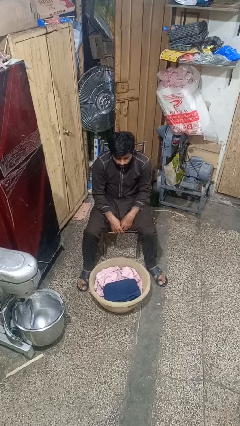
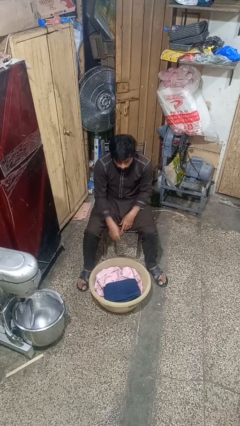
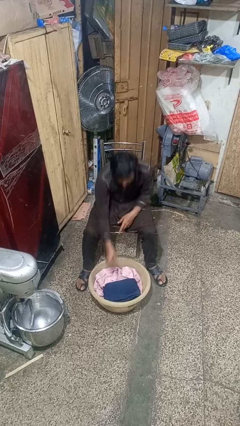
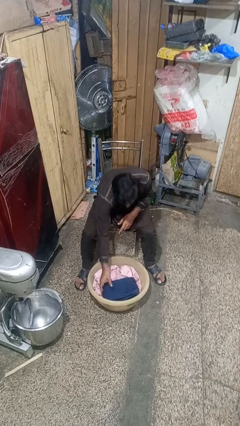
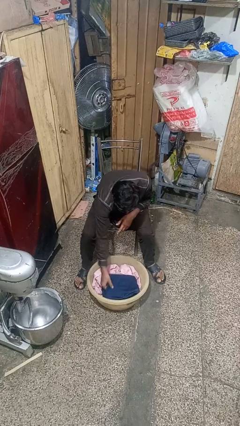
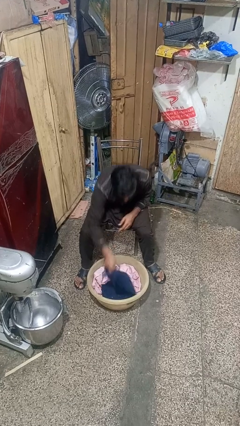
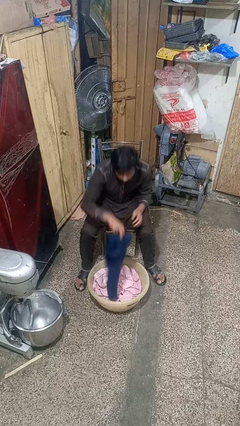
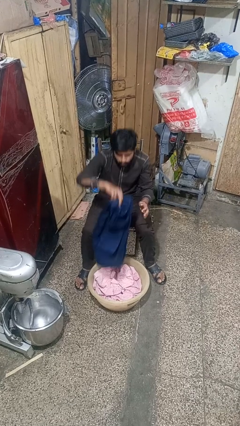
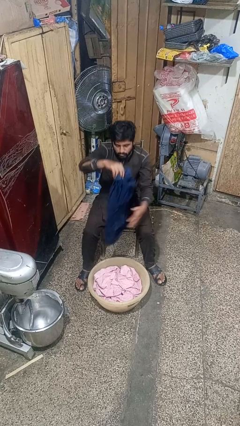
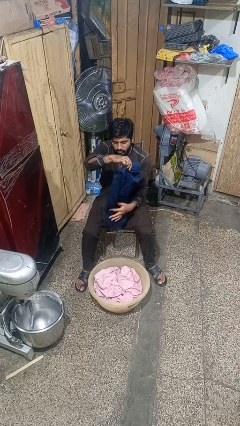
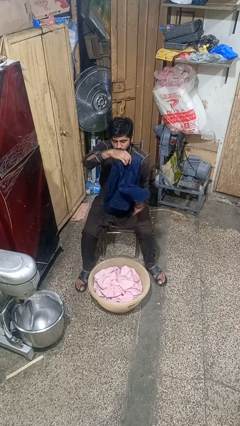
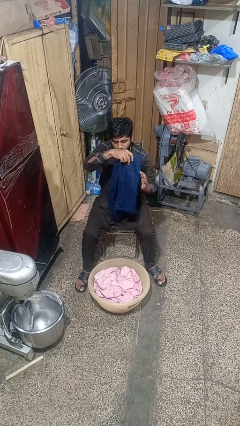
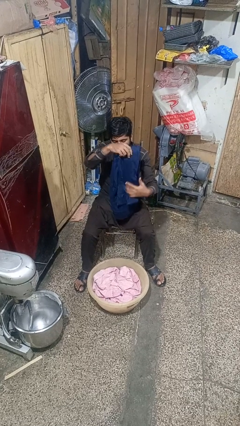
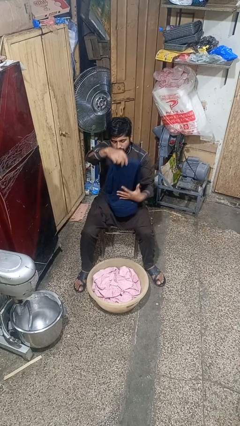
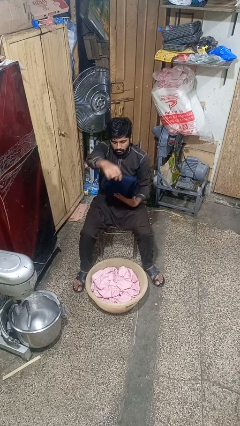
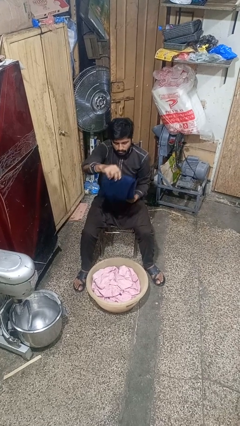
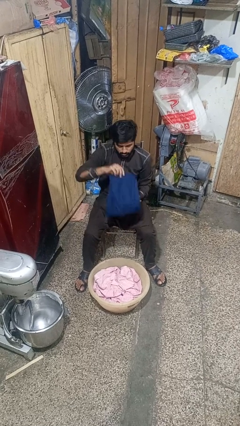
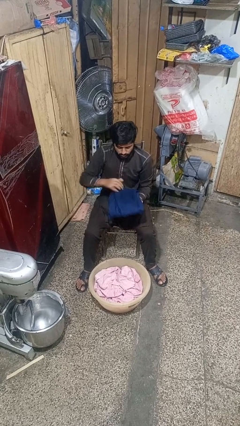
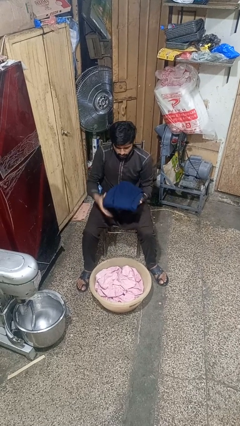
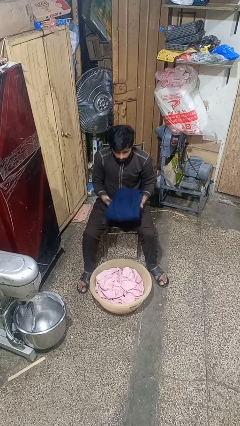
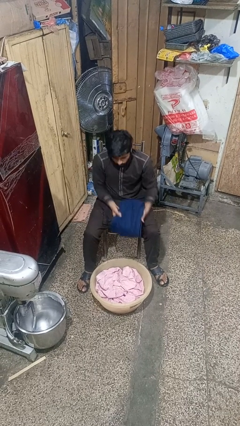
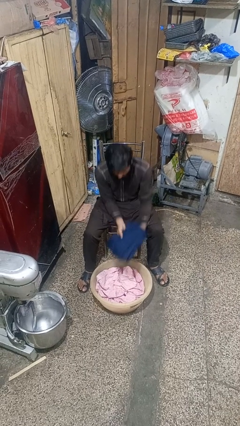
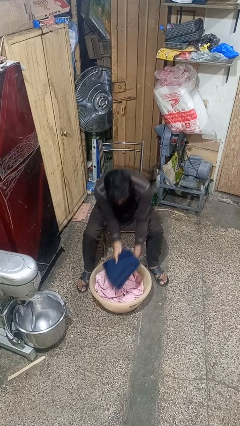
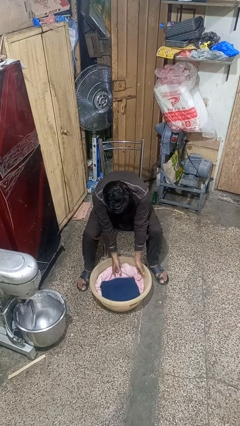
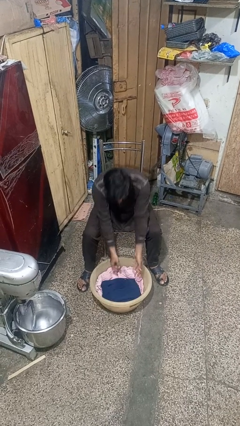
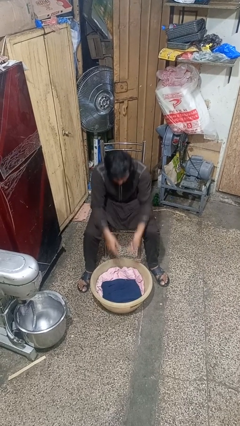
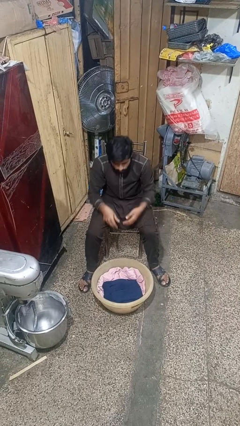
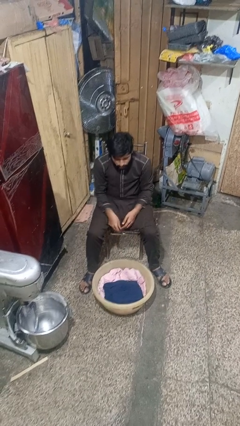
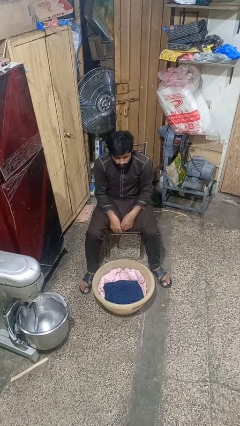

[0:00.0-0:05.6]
person folds pants

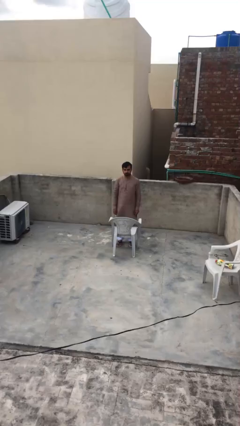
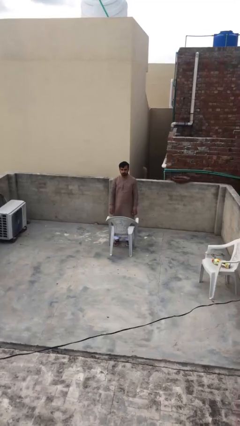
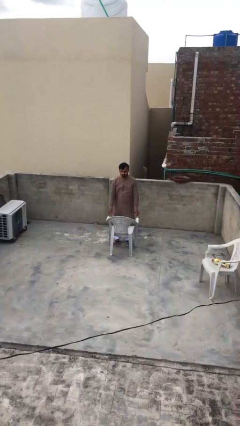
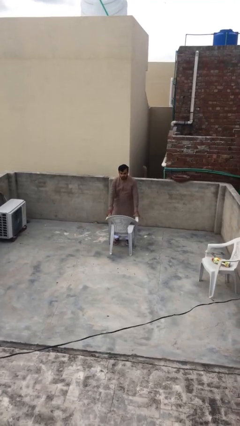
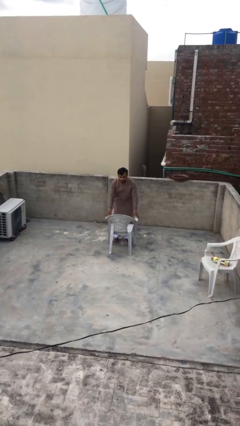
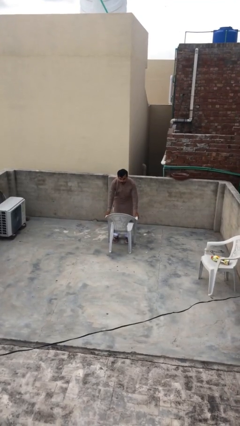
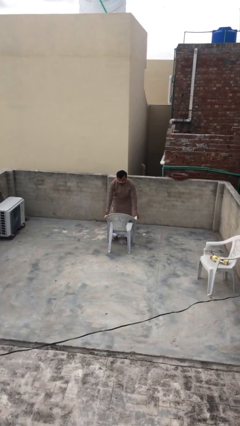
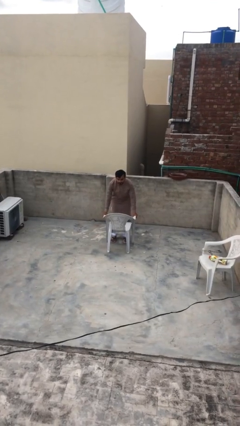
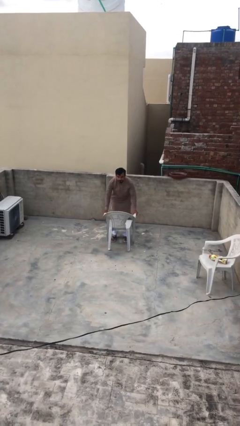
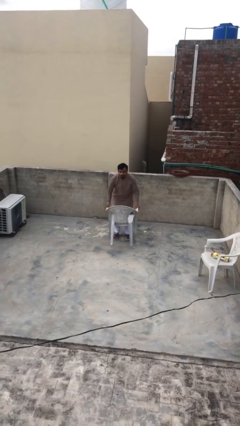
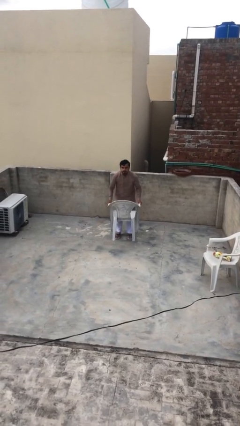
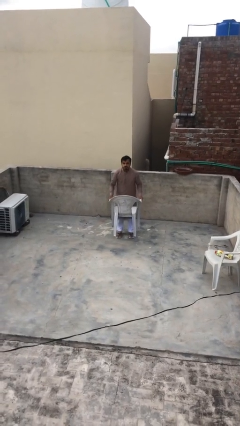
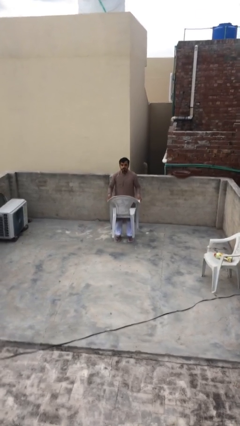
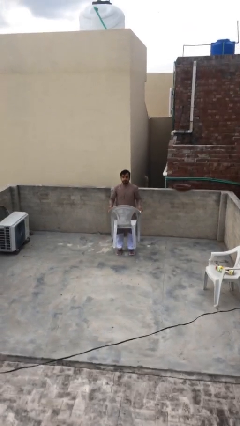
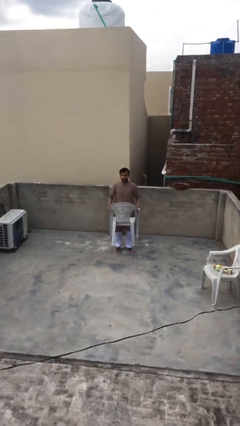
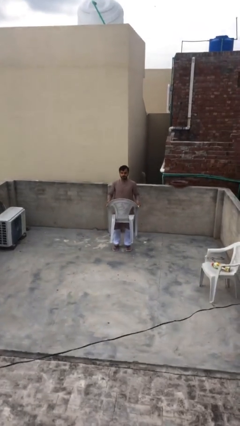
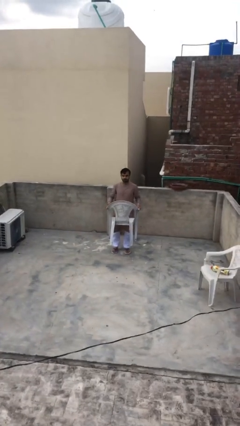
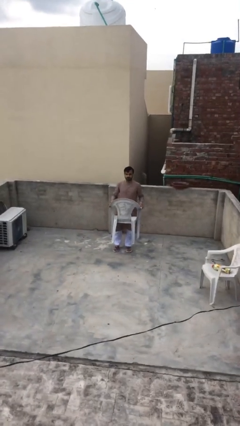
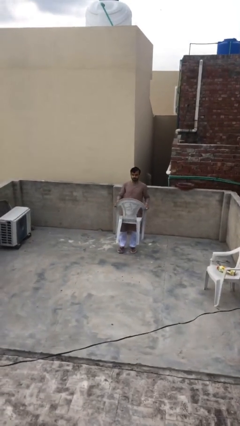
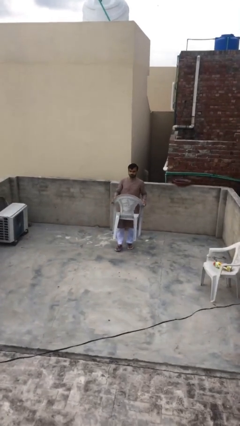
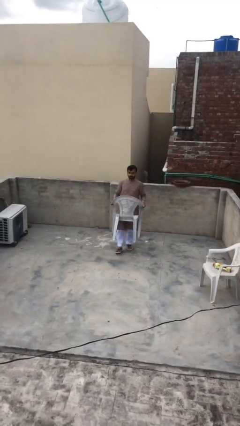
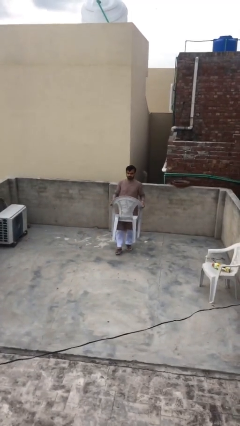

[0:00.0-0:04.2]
person picks up object from floor

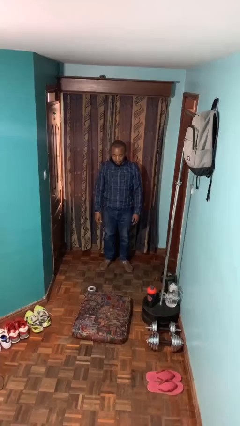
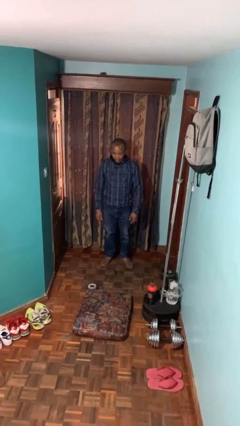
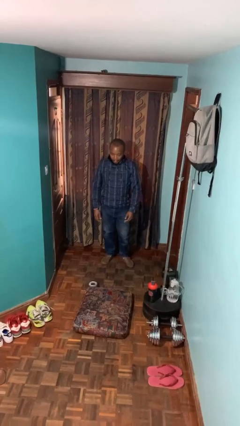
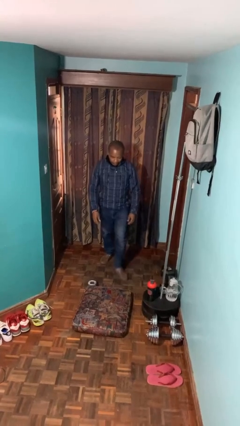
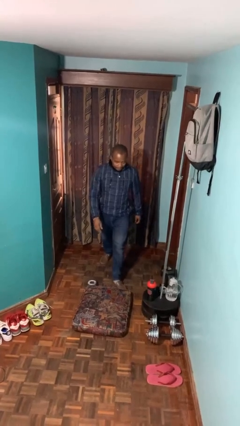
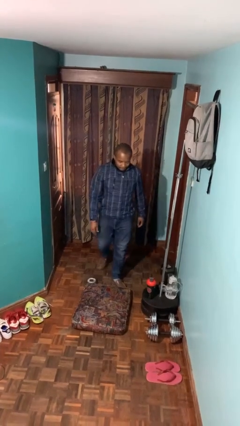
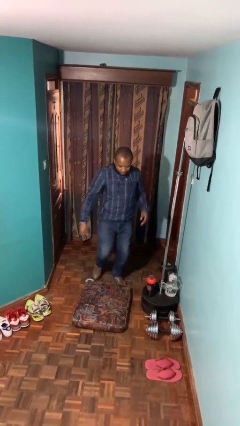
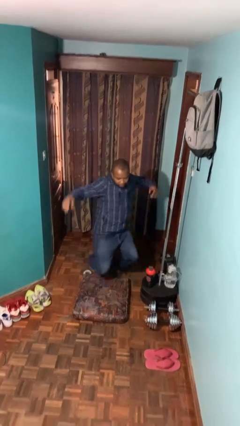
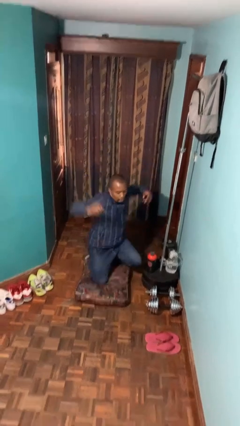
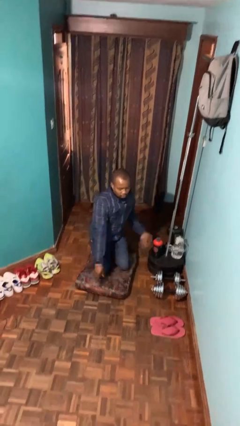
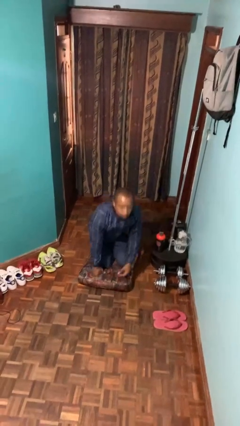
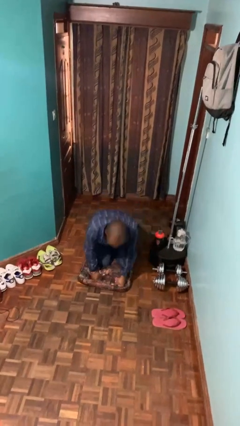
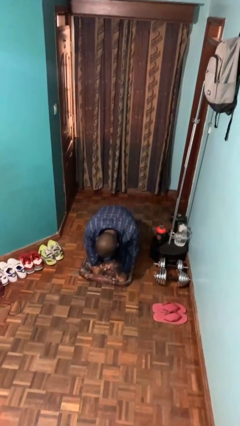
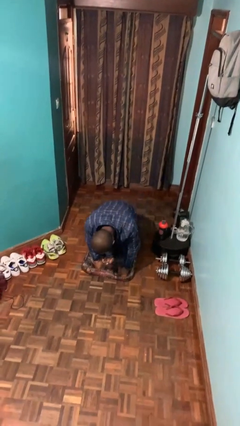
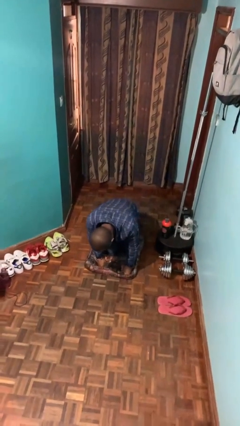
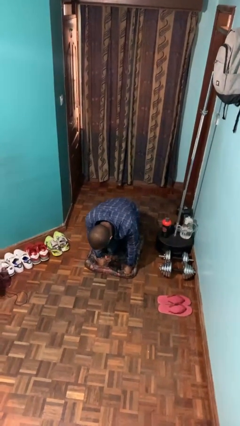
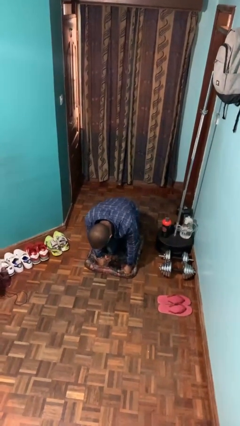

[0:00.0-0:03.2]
person trips on object on floor

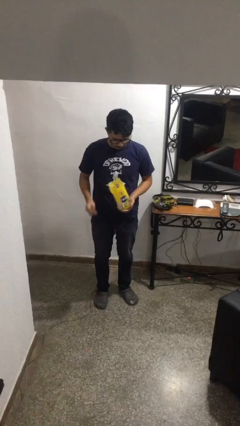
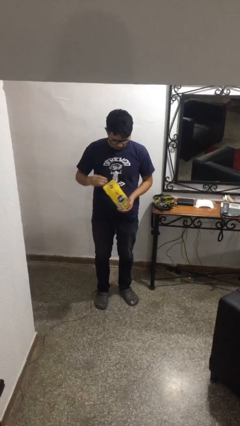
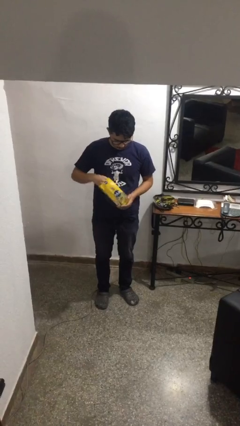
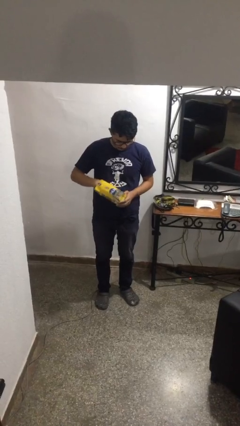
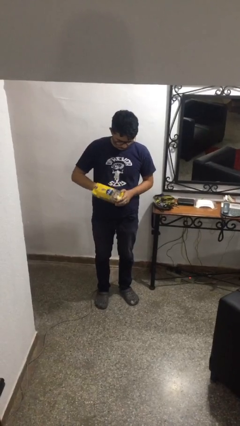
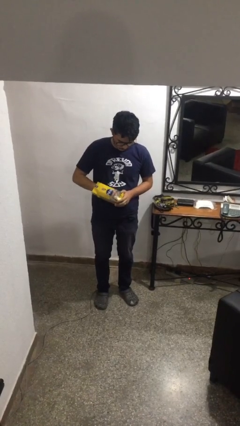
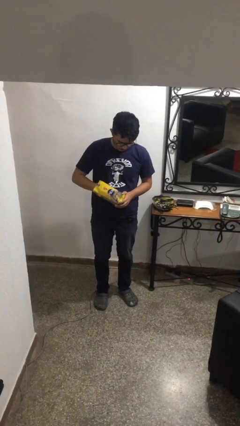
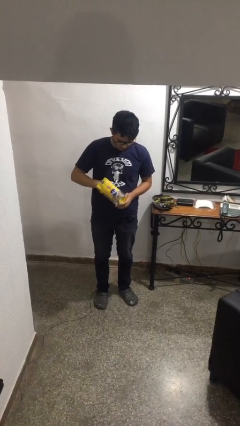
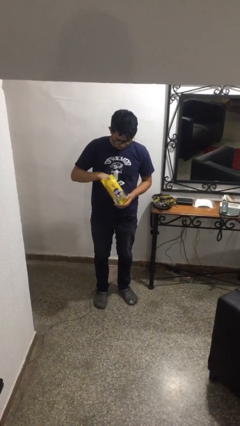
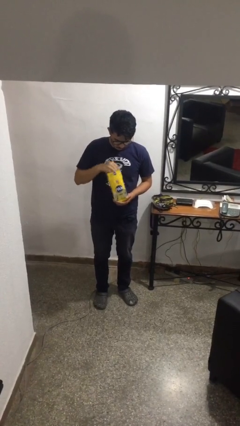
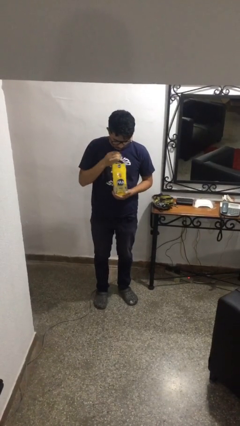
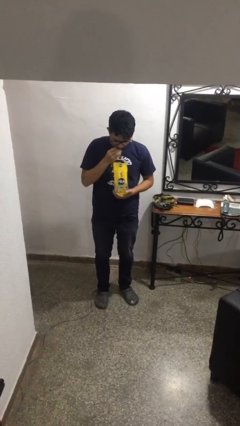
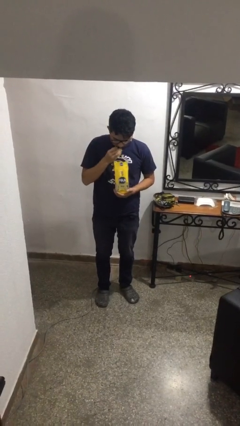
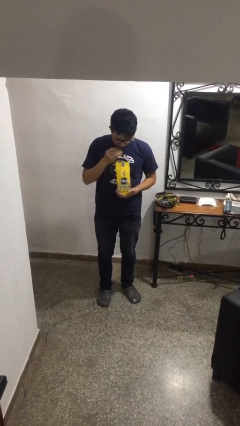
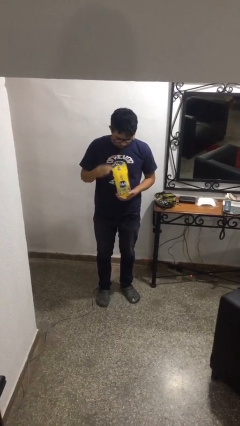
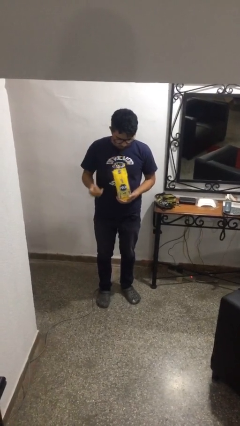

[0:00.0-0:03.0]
person eats snack from bag

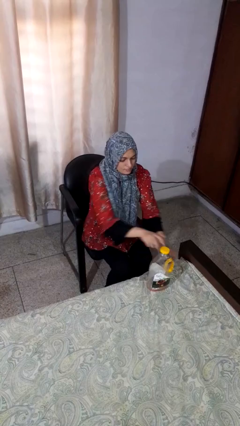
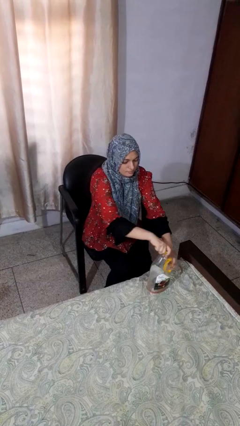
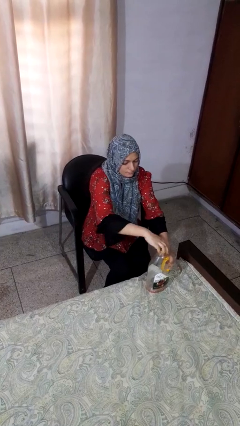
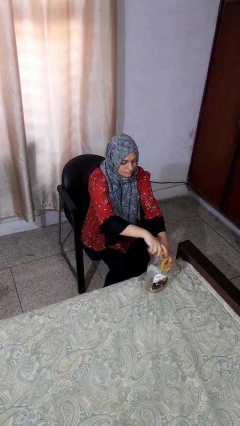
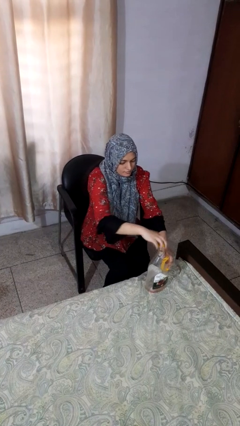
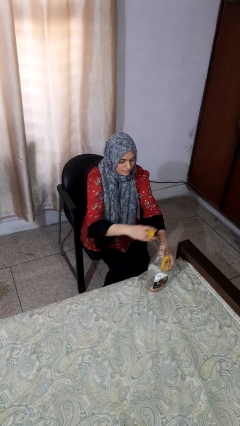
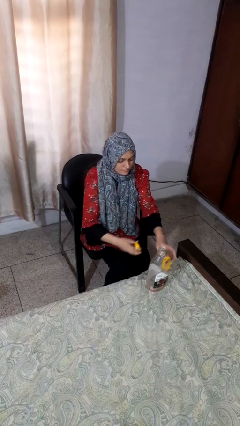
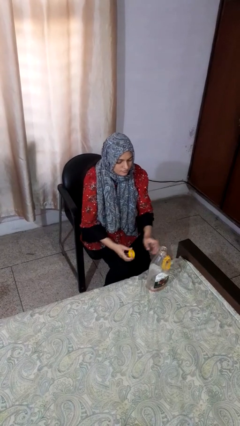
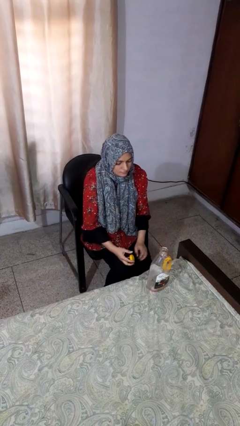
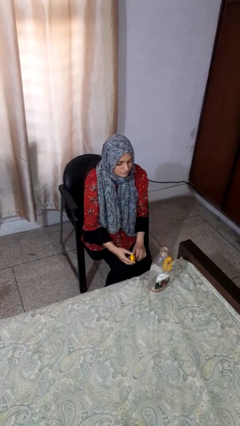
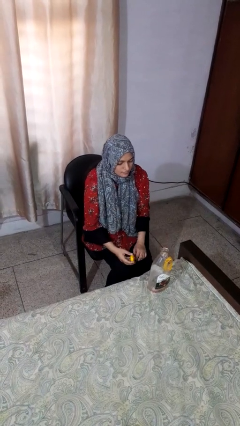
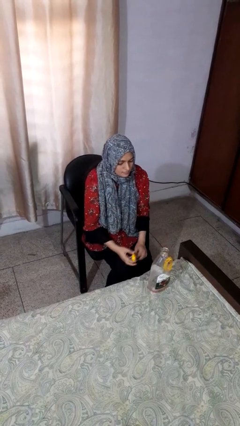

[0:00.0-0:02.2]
person unscrews lid from bottle
